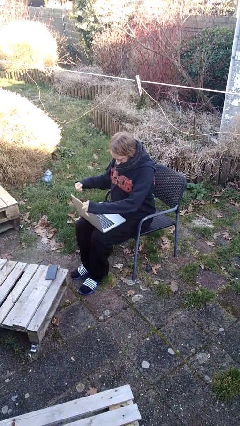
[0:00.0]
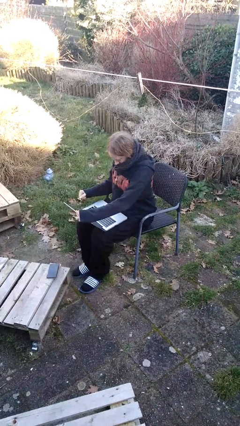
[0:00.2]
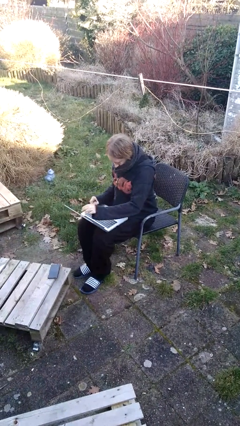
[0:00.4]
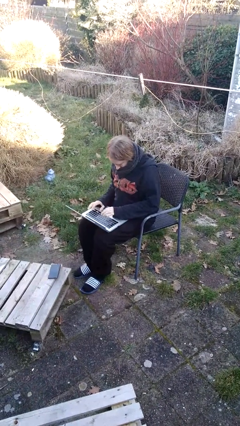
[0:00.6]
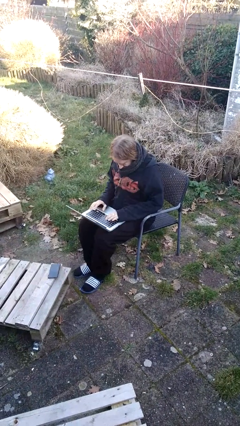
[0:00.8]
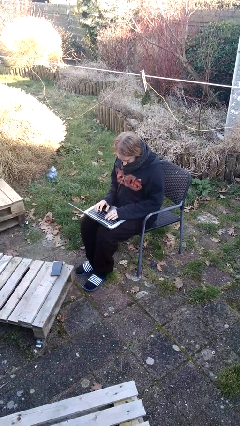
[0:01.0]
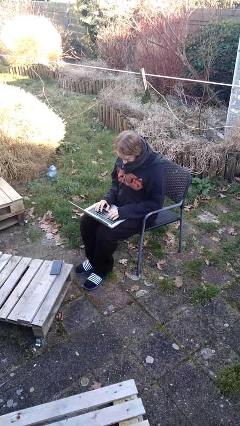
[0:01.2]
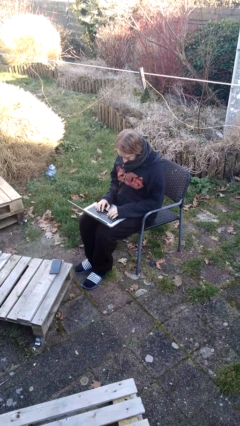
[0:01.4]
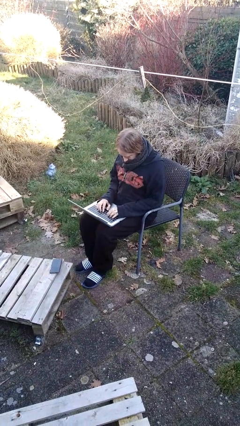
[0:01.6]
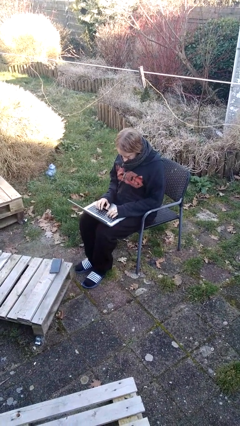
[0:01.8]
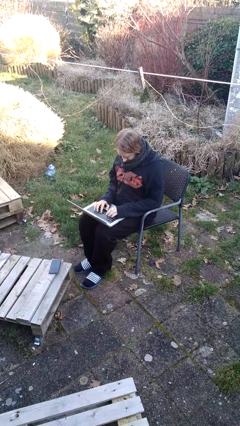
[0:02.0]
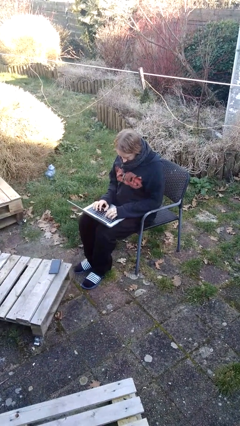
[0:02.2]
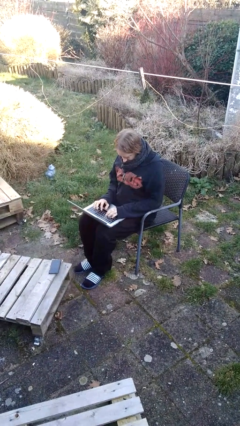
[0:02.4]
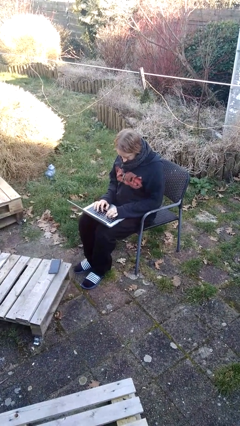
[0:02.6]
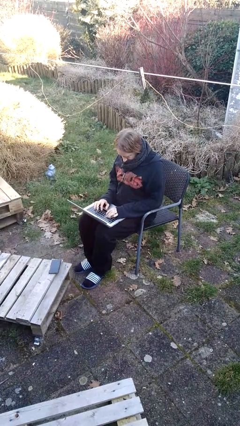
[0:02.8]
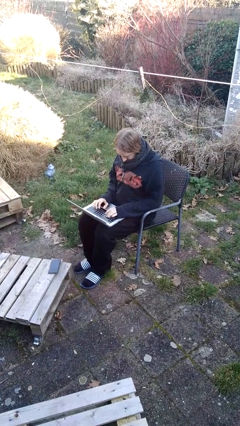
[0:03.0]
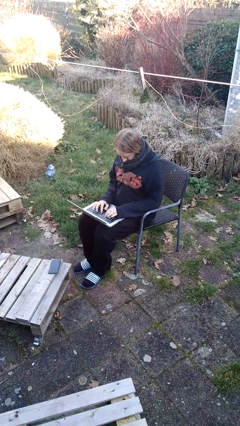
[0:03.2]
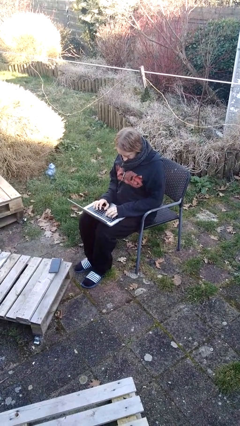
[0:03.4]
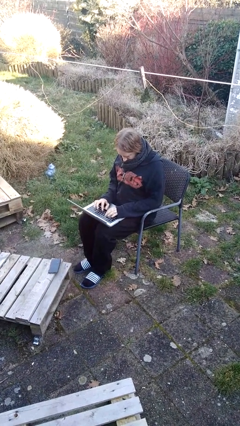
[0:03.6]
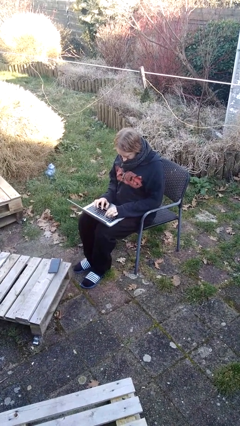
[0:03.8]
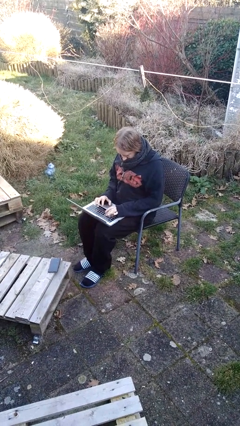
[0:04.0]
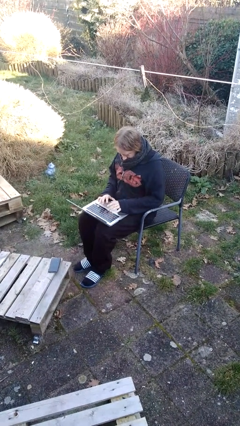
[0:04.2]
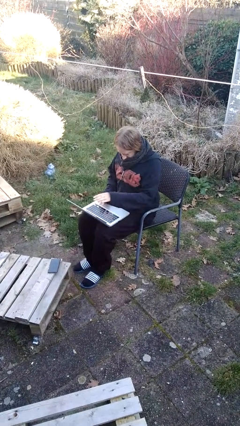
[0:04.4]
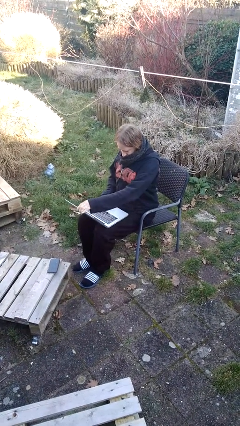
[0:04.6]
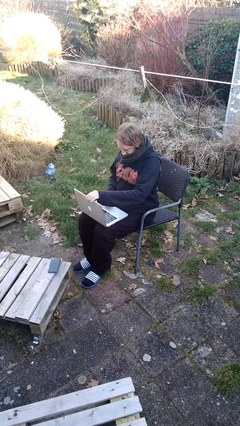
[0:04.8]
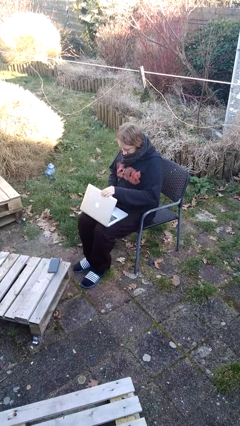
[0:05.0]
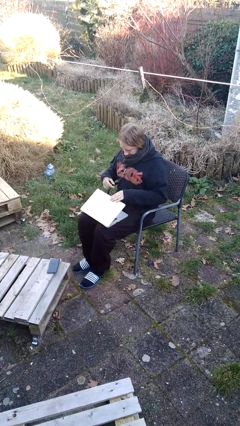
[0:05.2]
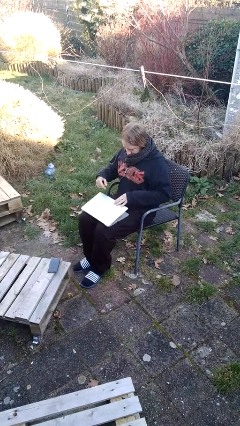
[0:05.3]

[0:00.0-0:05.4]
person interacts with laptop

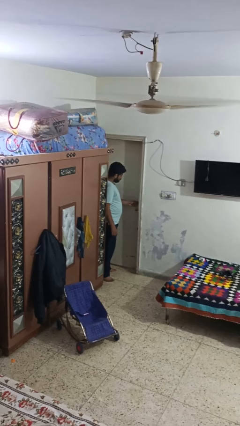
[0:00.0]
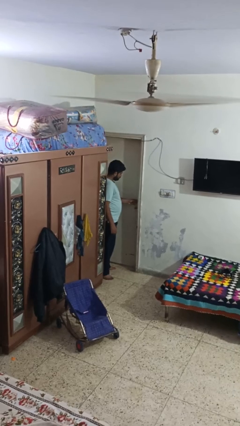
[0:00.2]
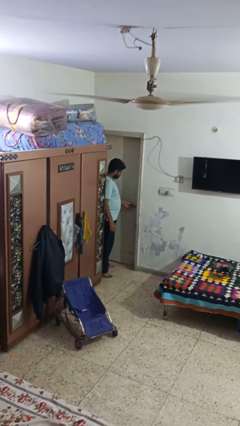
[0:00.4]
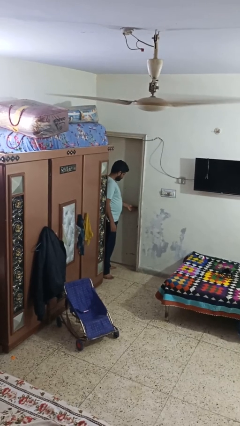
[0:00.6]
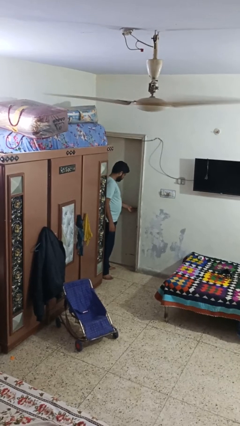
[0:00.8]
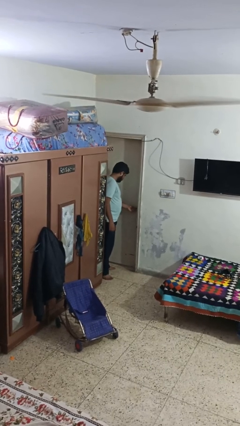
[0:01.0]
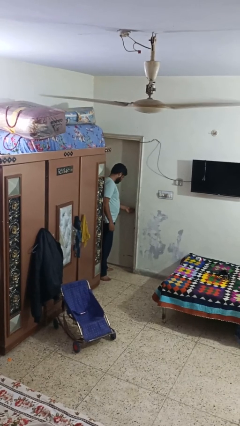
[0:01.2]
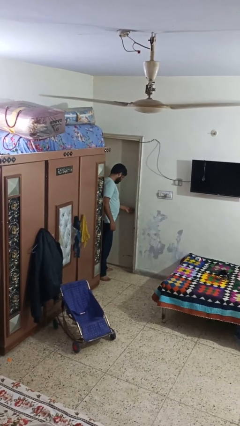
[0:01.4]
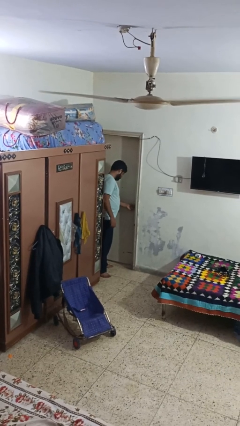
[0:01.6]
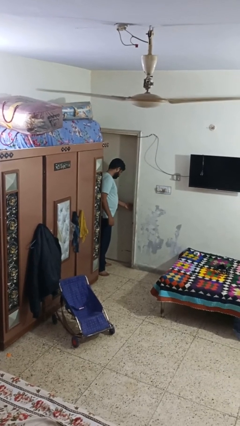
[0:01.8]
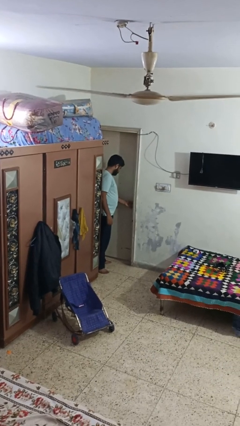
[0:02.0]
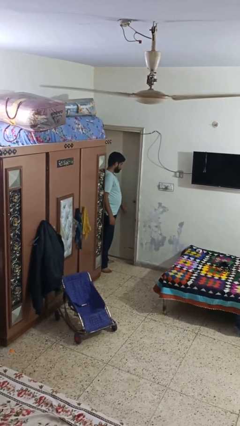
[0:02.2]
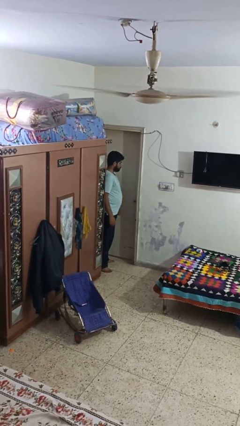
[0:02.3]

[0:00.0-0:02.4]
person locks door with keys

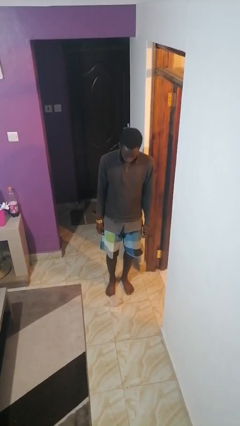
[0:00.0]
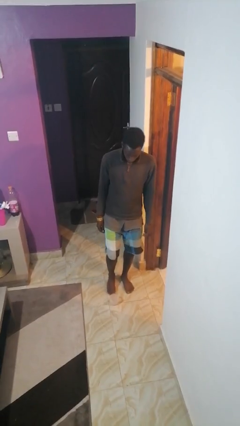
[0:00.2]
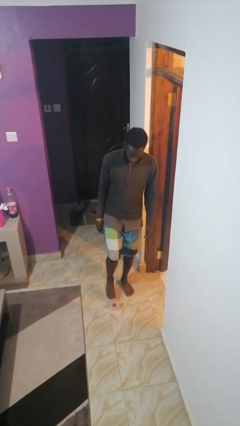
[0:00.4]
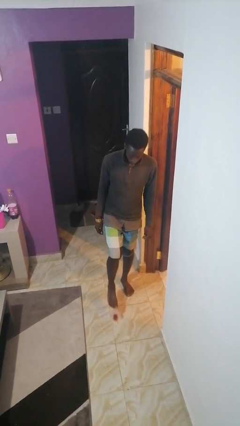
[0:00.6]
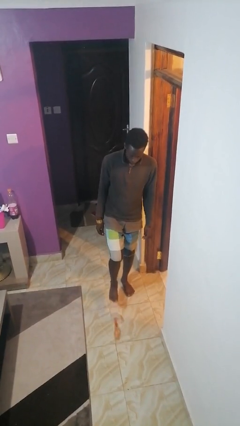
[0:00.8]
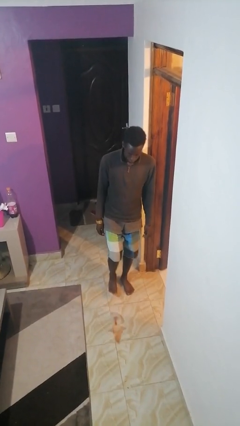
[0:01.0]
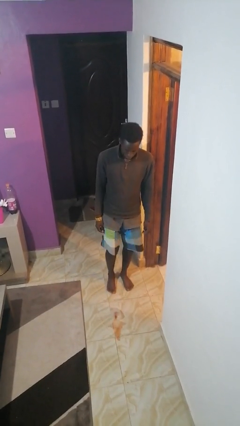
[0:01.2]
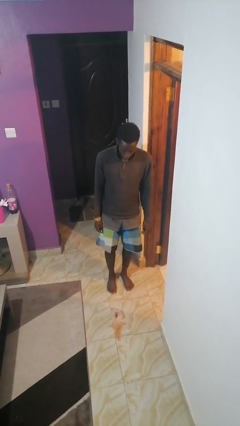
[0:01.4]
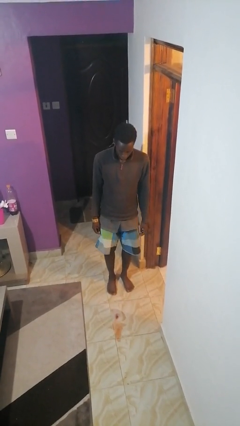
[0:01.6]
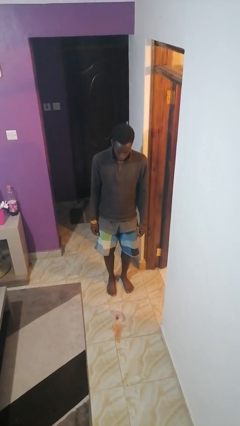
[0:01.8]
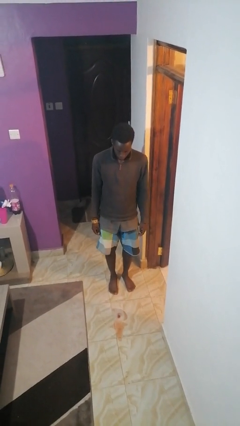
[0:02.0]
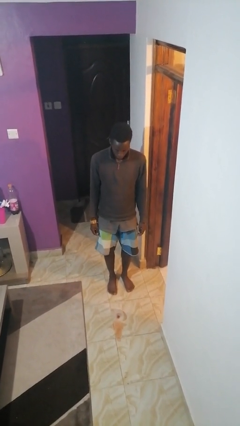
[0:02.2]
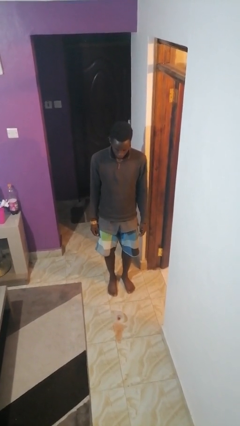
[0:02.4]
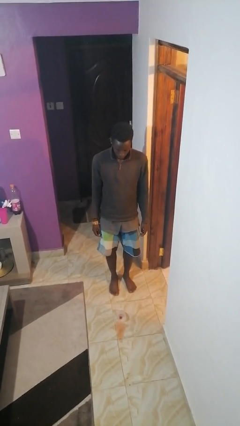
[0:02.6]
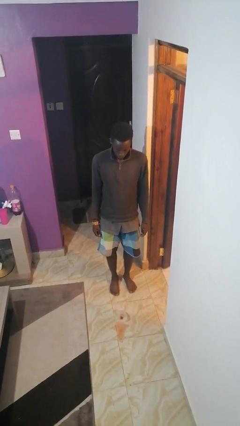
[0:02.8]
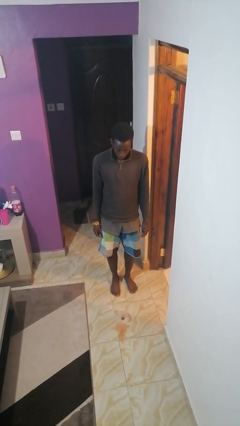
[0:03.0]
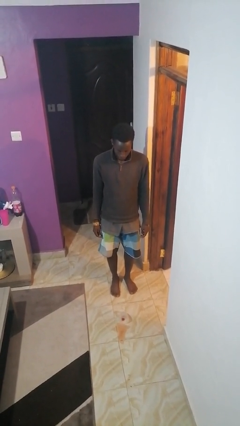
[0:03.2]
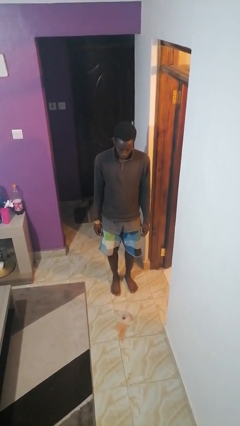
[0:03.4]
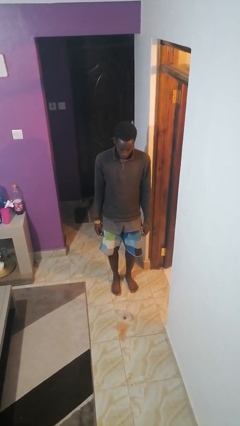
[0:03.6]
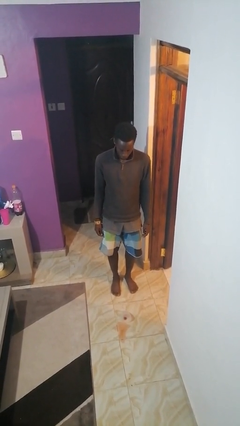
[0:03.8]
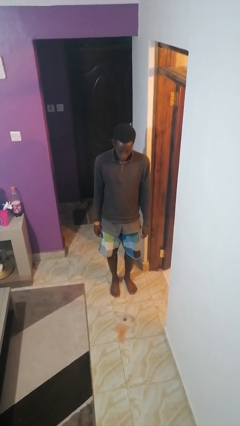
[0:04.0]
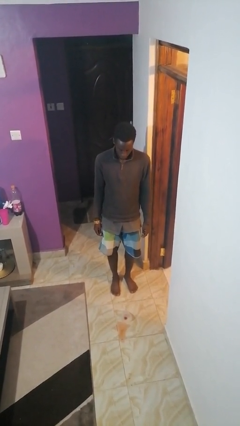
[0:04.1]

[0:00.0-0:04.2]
person spills on floor

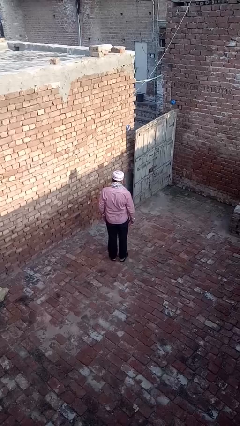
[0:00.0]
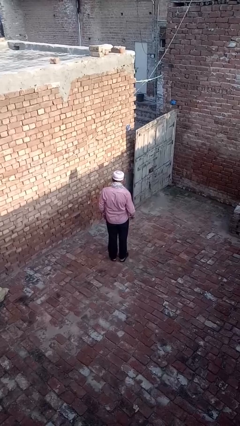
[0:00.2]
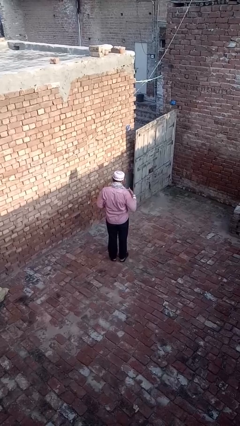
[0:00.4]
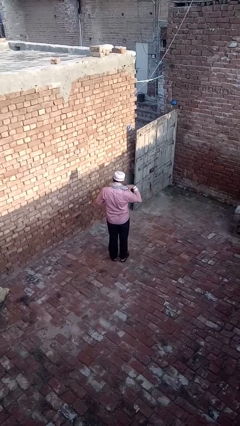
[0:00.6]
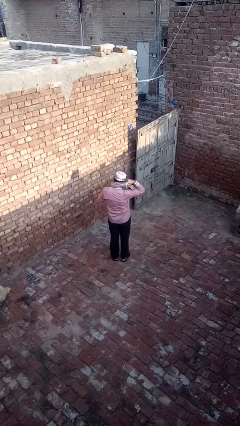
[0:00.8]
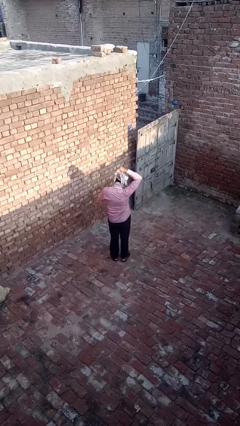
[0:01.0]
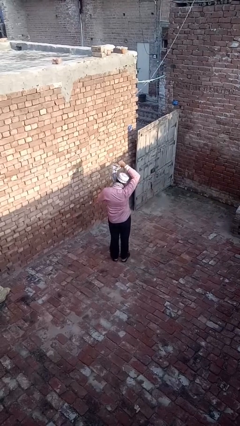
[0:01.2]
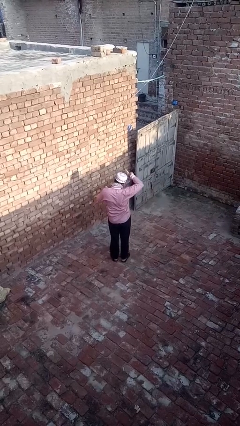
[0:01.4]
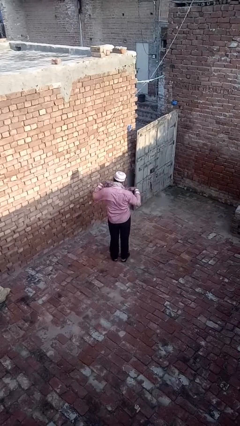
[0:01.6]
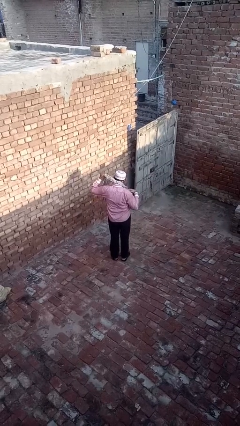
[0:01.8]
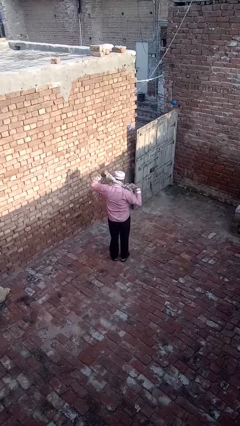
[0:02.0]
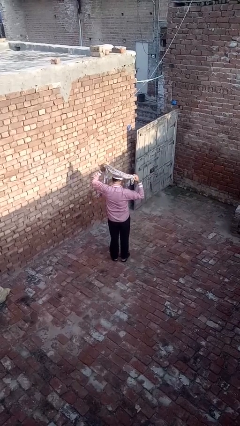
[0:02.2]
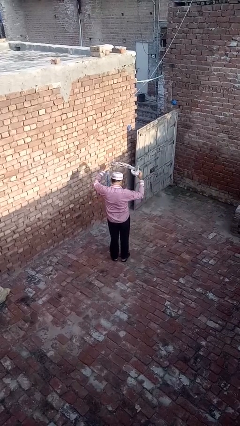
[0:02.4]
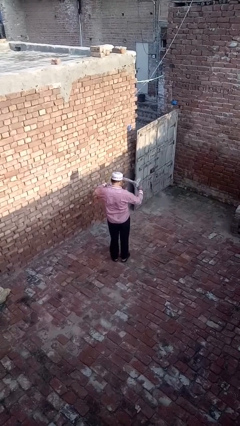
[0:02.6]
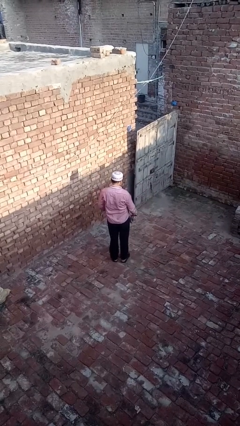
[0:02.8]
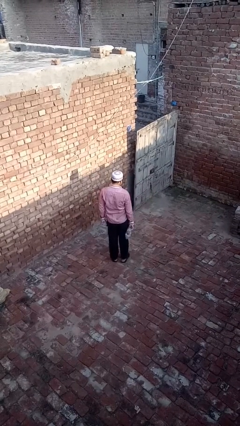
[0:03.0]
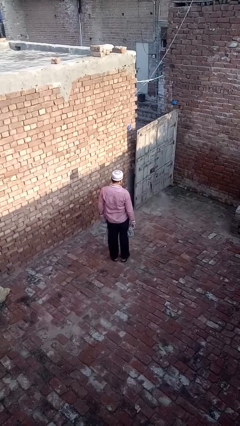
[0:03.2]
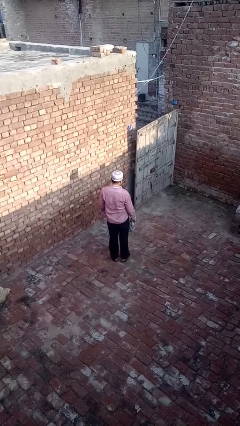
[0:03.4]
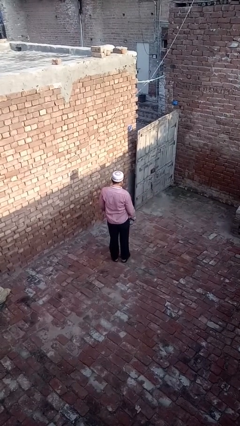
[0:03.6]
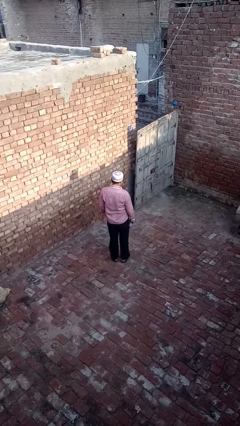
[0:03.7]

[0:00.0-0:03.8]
person takes off scarf

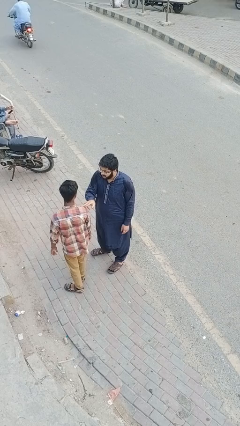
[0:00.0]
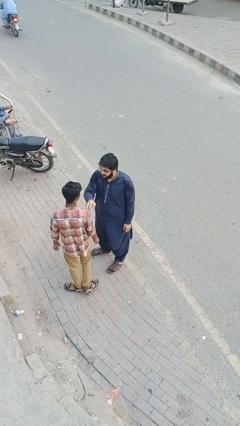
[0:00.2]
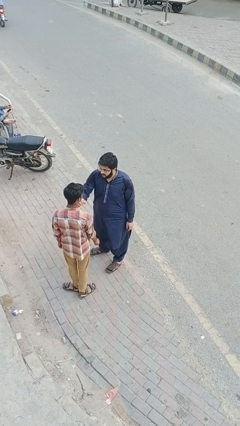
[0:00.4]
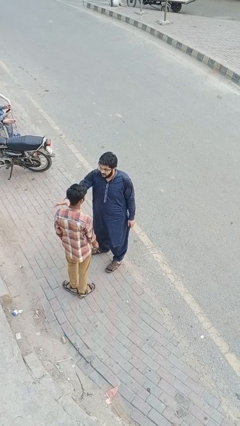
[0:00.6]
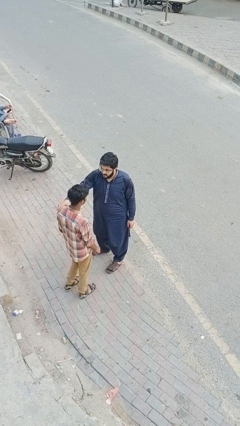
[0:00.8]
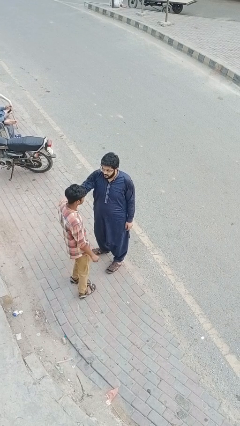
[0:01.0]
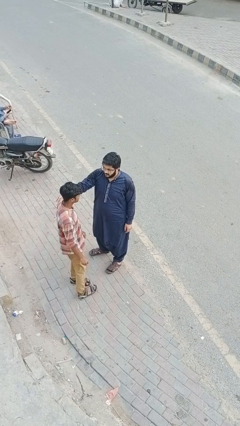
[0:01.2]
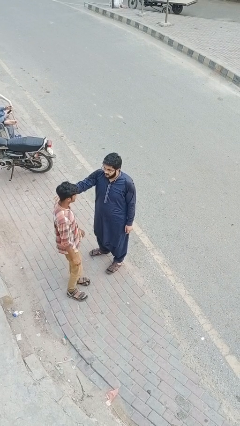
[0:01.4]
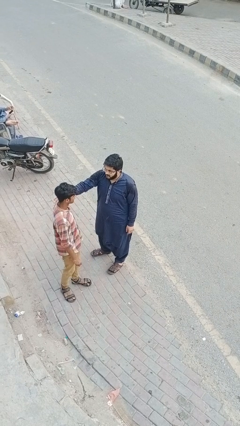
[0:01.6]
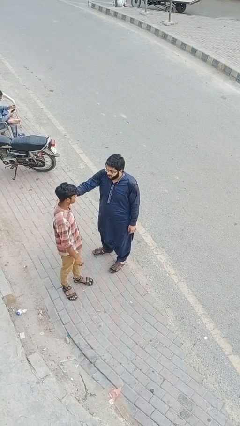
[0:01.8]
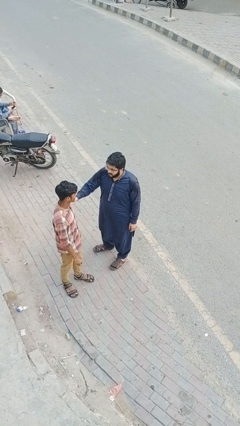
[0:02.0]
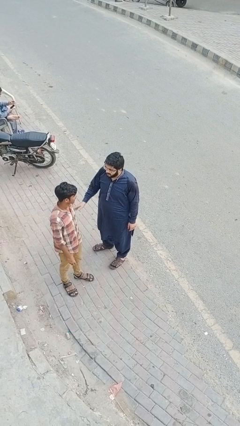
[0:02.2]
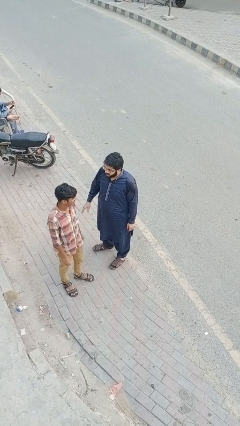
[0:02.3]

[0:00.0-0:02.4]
person spins person around
